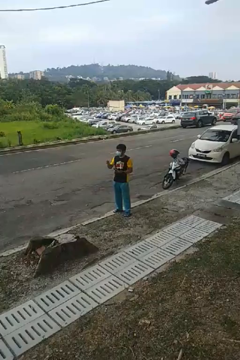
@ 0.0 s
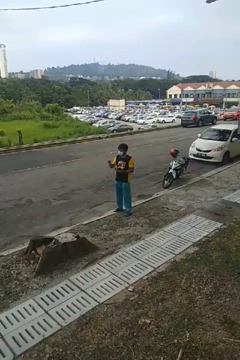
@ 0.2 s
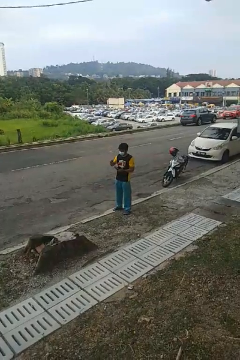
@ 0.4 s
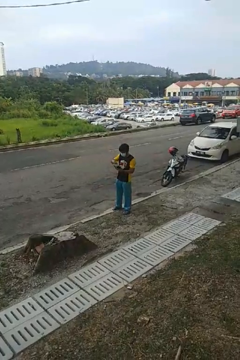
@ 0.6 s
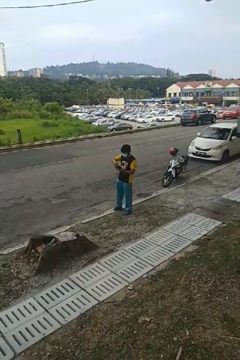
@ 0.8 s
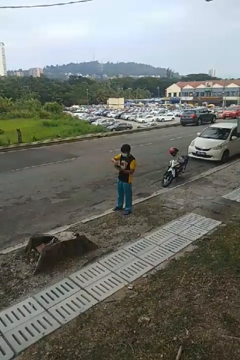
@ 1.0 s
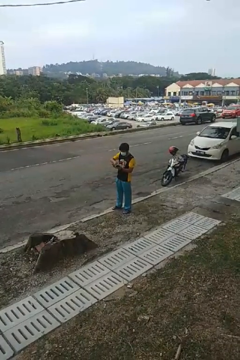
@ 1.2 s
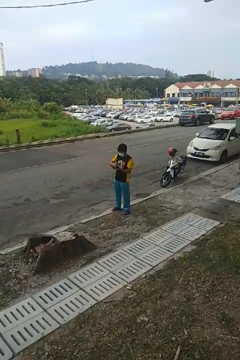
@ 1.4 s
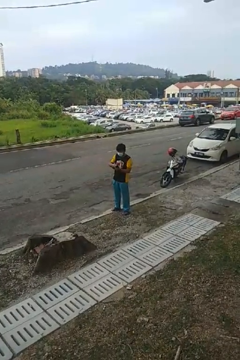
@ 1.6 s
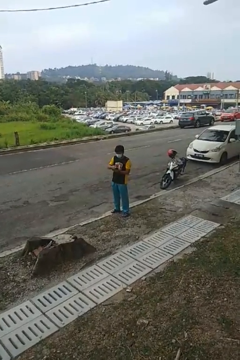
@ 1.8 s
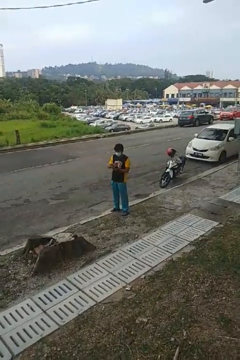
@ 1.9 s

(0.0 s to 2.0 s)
person puts object into purse

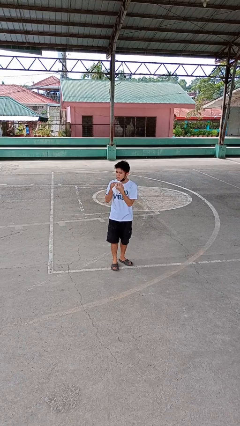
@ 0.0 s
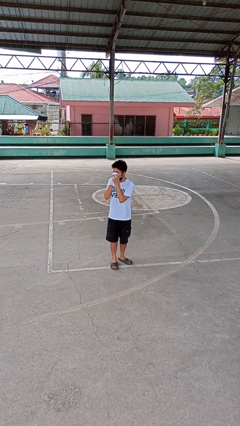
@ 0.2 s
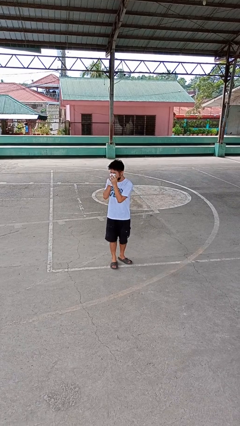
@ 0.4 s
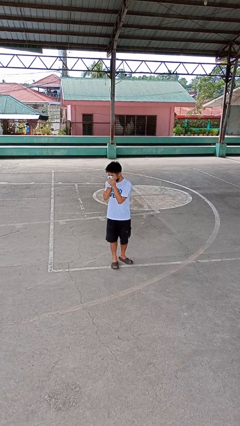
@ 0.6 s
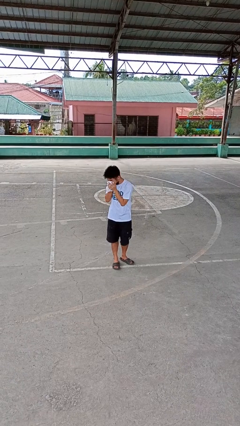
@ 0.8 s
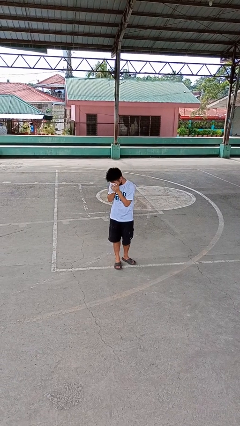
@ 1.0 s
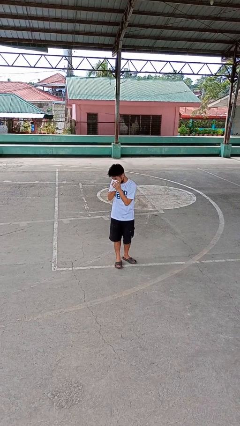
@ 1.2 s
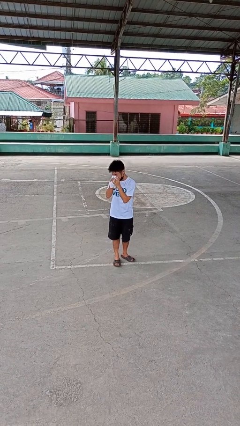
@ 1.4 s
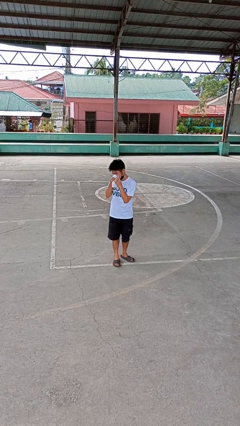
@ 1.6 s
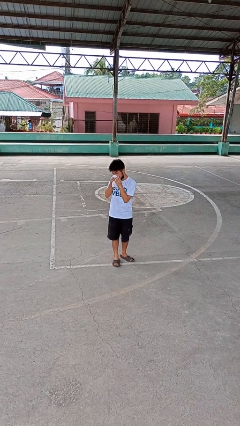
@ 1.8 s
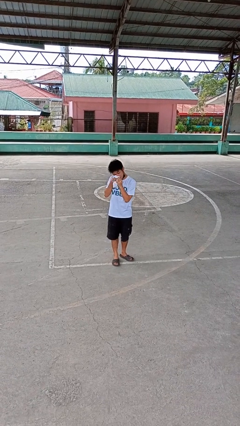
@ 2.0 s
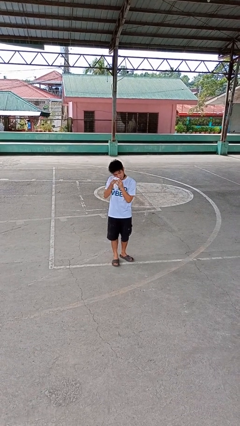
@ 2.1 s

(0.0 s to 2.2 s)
person blows nose

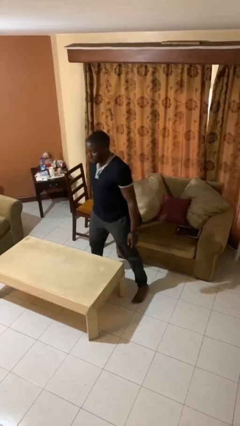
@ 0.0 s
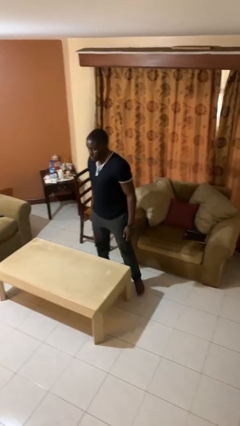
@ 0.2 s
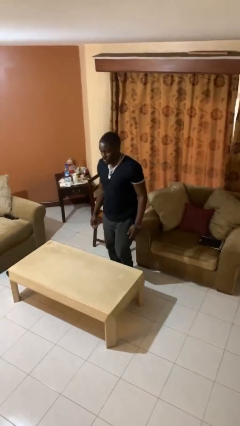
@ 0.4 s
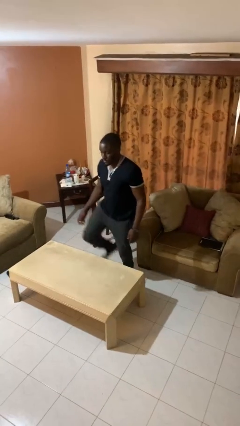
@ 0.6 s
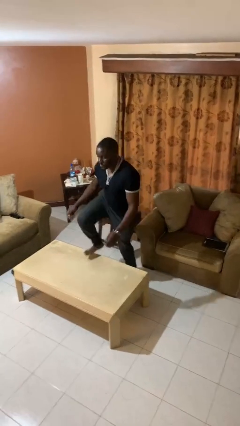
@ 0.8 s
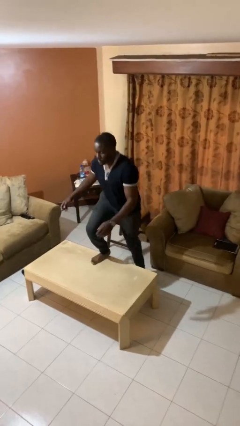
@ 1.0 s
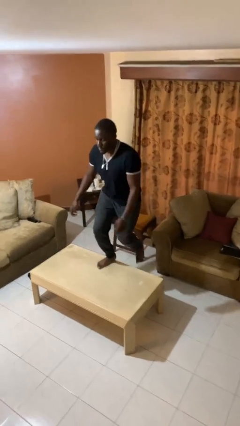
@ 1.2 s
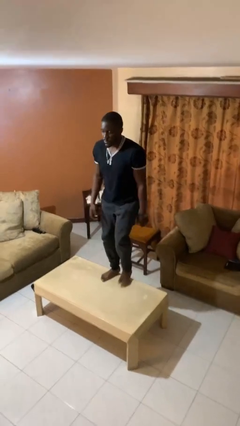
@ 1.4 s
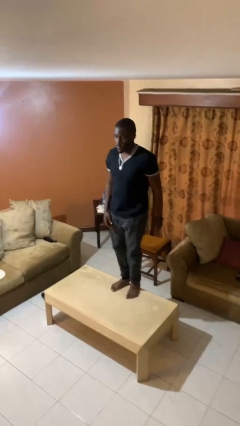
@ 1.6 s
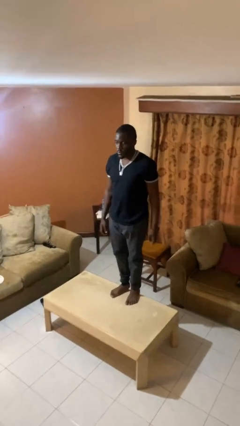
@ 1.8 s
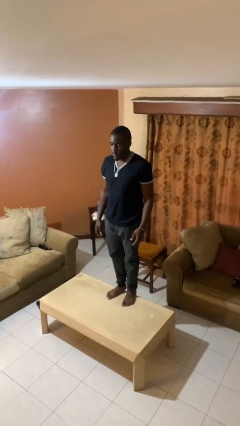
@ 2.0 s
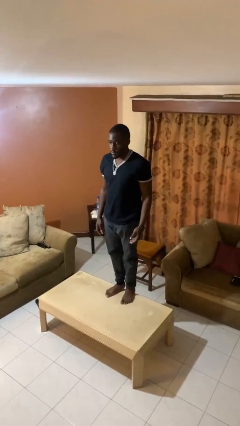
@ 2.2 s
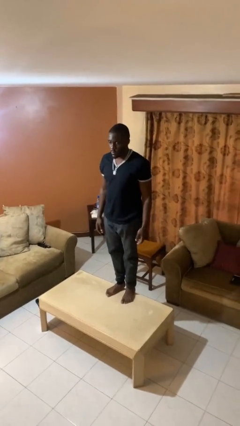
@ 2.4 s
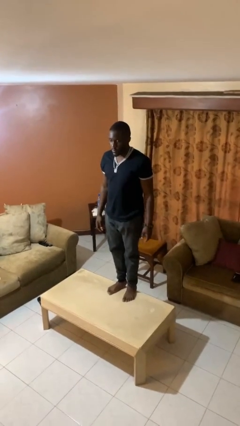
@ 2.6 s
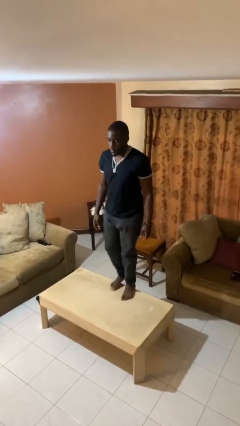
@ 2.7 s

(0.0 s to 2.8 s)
person climbs on table

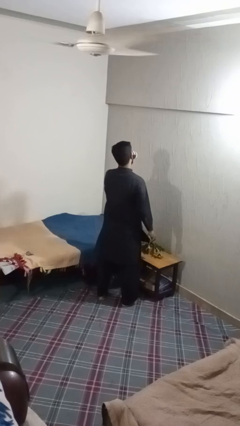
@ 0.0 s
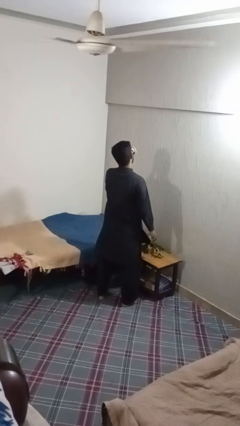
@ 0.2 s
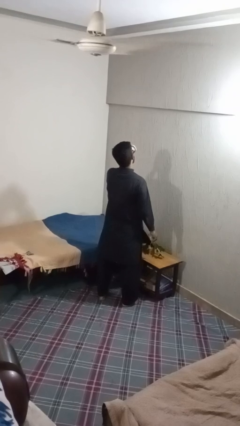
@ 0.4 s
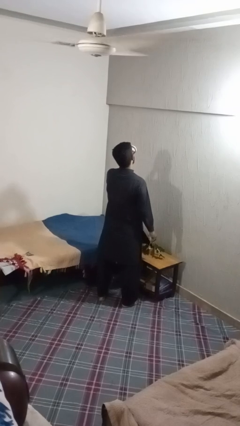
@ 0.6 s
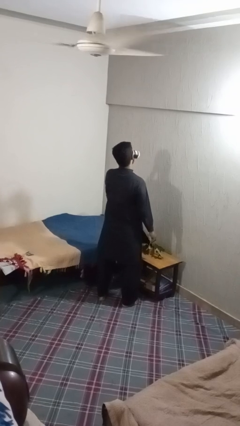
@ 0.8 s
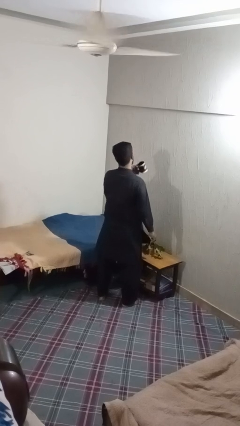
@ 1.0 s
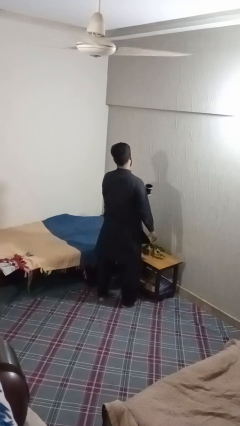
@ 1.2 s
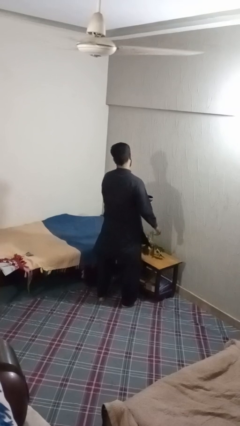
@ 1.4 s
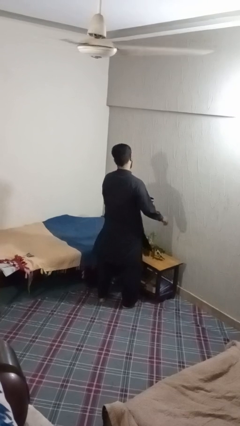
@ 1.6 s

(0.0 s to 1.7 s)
person drinks from mug

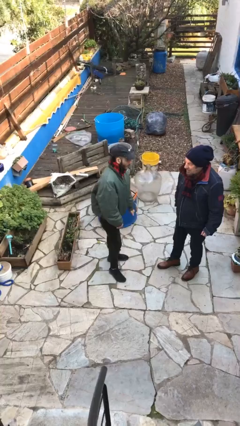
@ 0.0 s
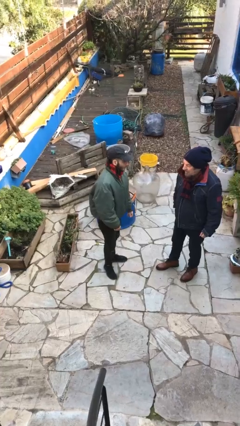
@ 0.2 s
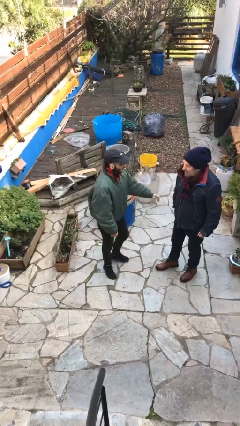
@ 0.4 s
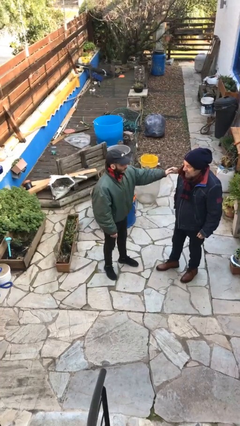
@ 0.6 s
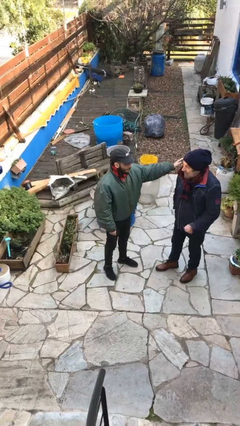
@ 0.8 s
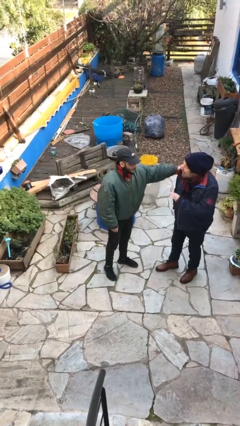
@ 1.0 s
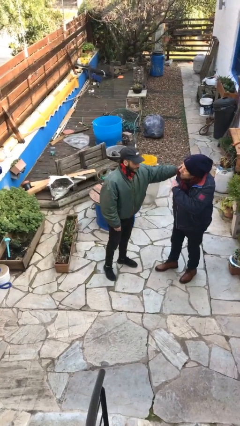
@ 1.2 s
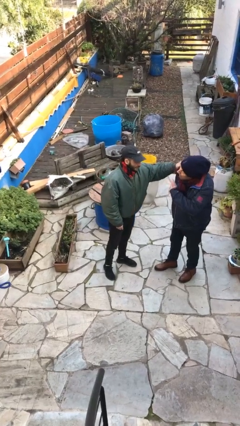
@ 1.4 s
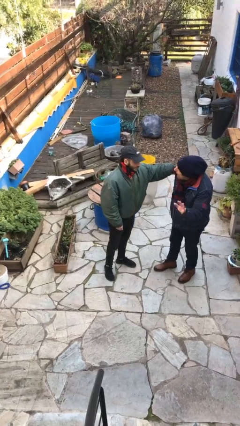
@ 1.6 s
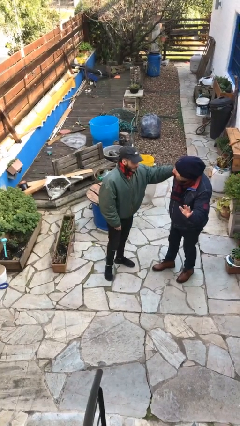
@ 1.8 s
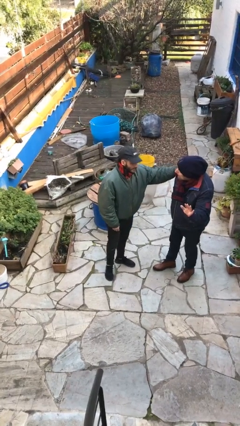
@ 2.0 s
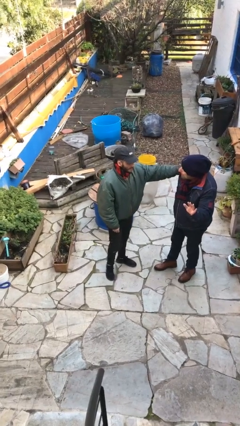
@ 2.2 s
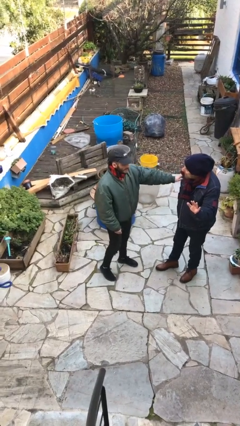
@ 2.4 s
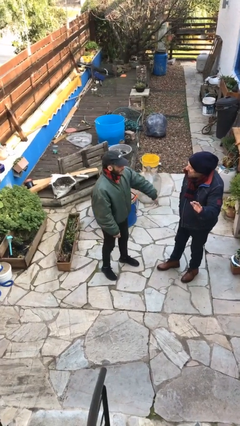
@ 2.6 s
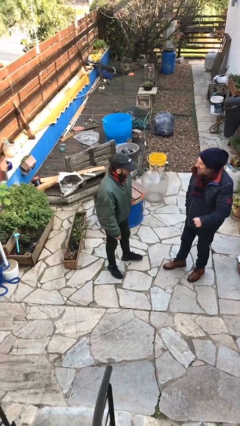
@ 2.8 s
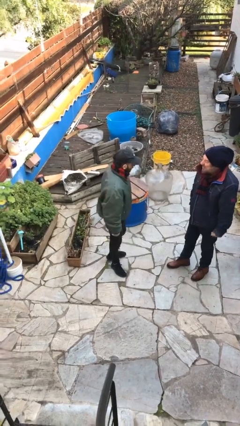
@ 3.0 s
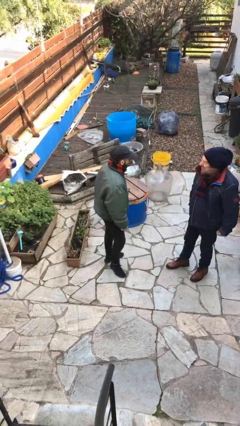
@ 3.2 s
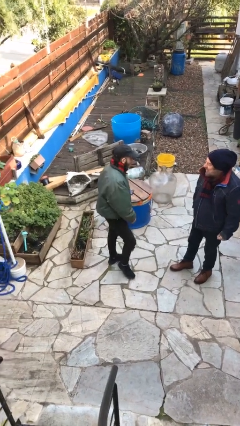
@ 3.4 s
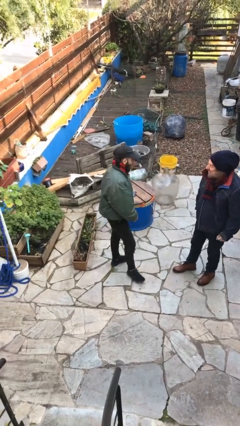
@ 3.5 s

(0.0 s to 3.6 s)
person pounds shoulders of person

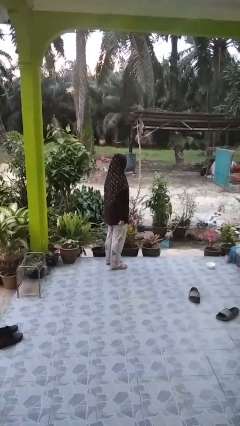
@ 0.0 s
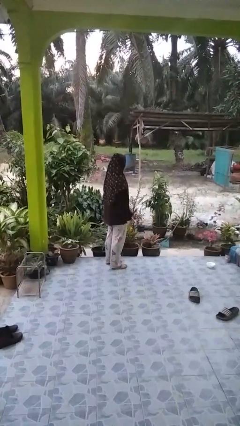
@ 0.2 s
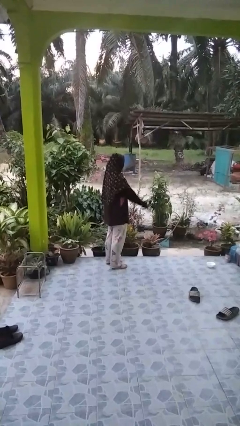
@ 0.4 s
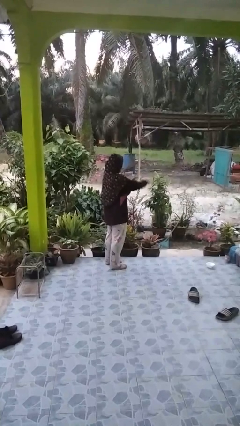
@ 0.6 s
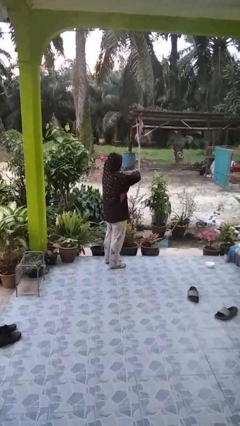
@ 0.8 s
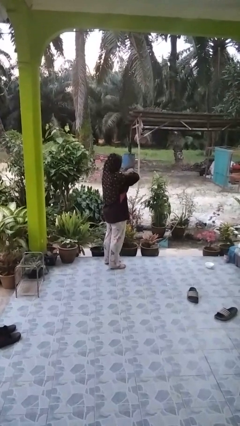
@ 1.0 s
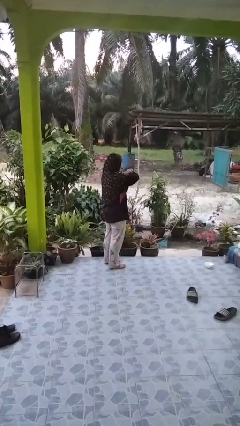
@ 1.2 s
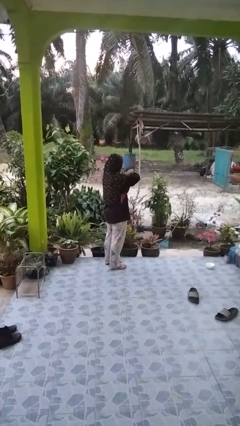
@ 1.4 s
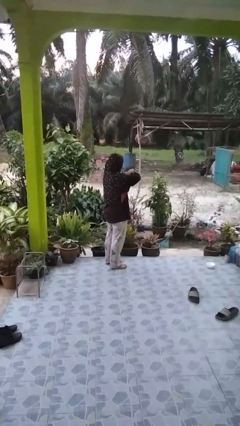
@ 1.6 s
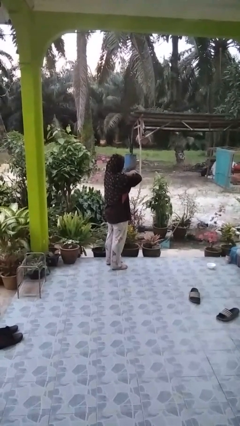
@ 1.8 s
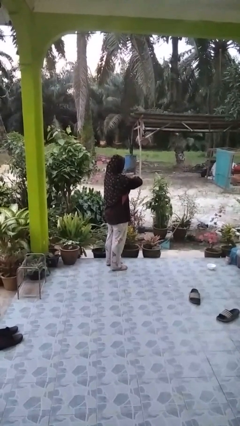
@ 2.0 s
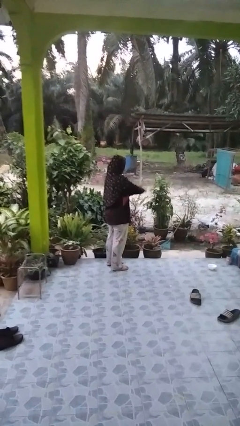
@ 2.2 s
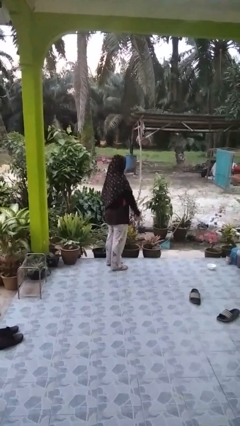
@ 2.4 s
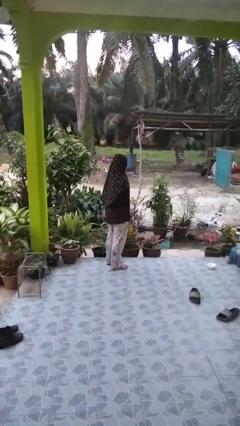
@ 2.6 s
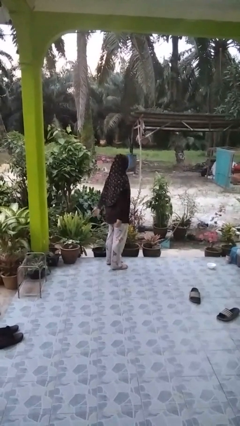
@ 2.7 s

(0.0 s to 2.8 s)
person looks at wristwatch

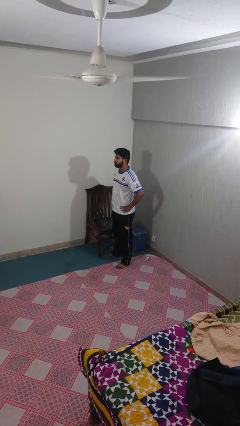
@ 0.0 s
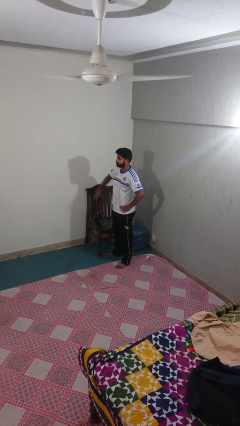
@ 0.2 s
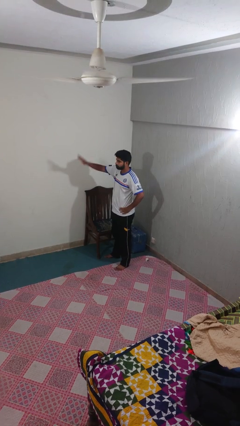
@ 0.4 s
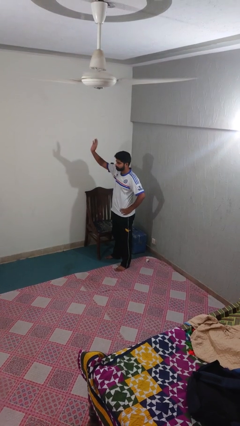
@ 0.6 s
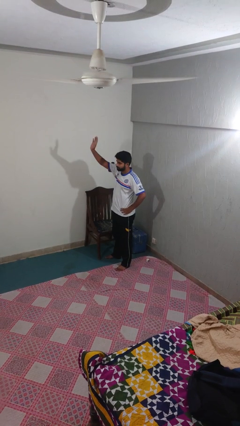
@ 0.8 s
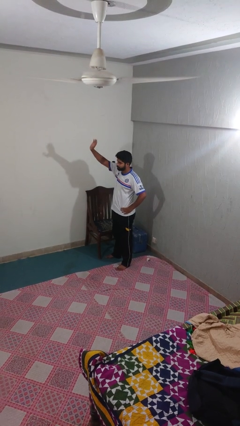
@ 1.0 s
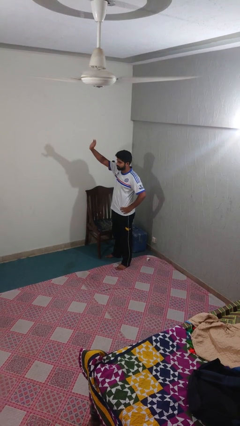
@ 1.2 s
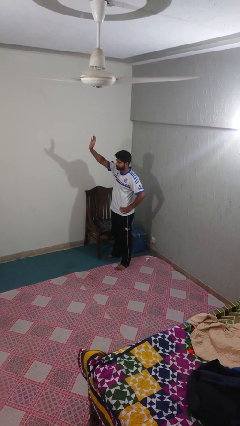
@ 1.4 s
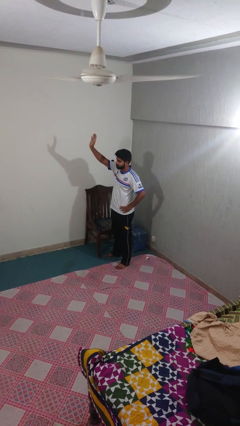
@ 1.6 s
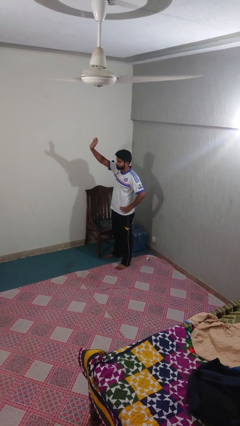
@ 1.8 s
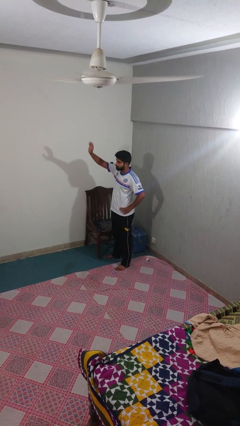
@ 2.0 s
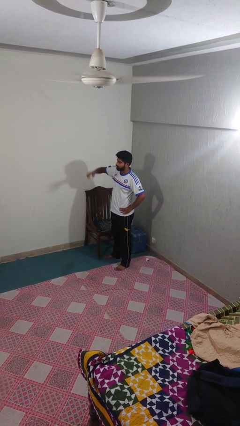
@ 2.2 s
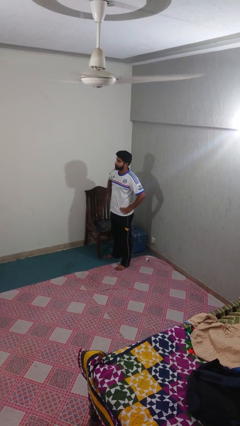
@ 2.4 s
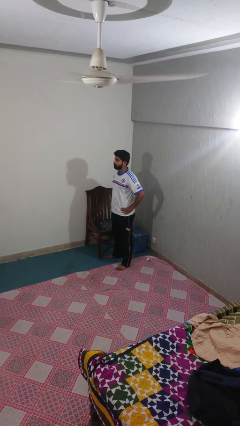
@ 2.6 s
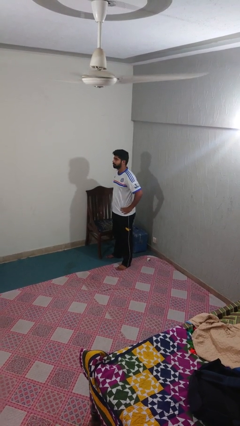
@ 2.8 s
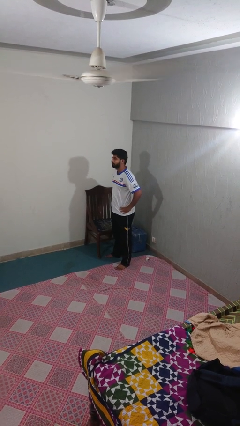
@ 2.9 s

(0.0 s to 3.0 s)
person waves at person
